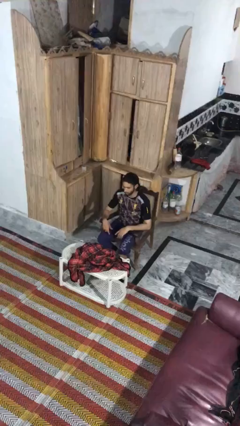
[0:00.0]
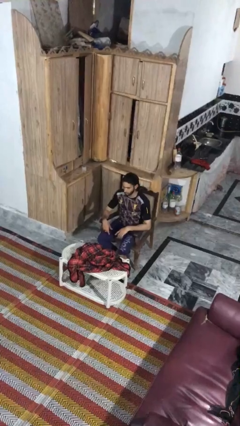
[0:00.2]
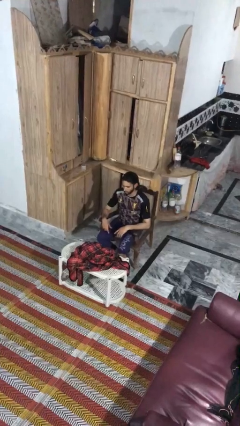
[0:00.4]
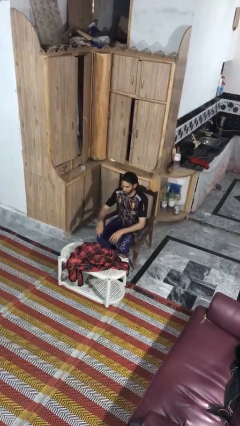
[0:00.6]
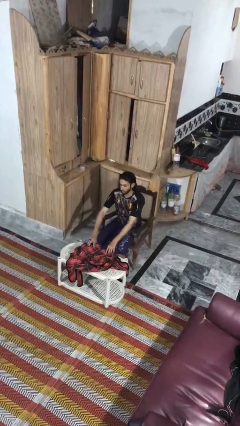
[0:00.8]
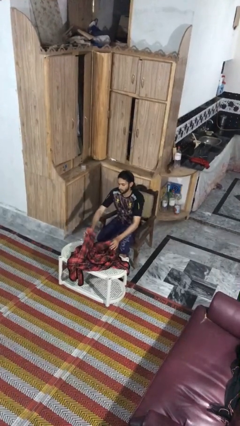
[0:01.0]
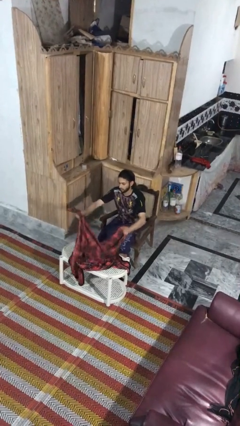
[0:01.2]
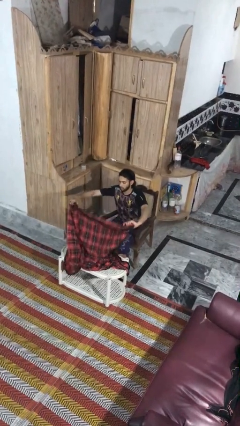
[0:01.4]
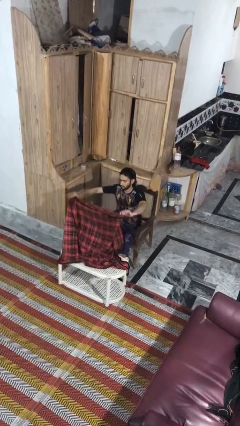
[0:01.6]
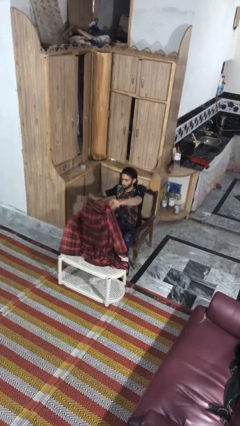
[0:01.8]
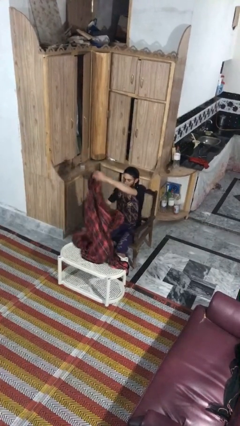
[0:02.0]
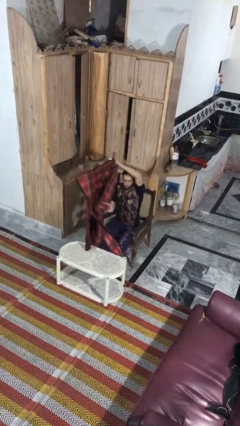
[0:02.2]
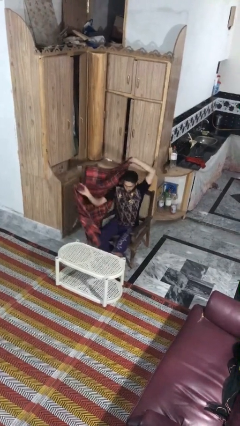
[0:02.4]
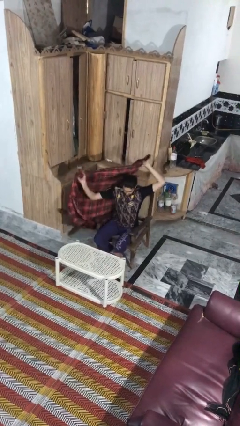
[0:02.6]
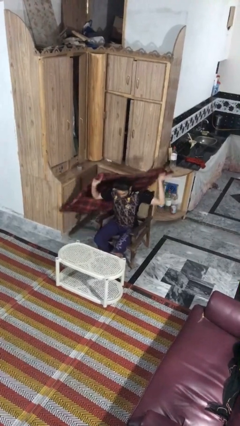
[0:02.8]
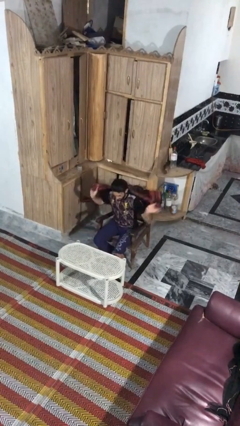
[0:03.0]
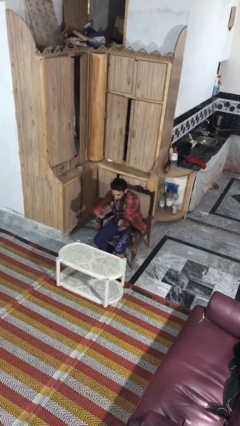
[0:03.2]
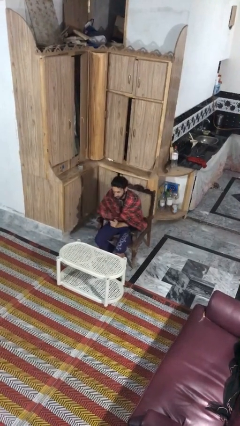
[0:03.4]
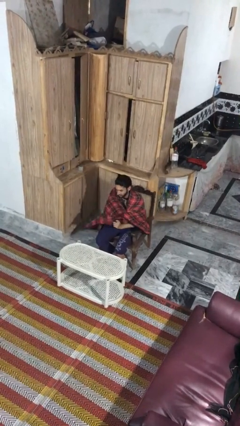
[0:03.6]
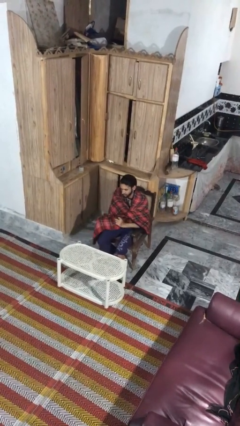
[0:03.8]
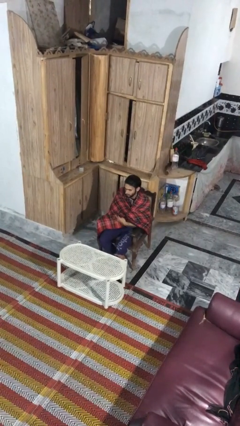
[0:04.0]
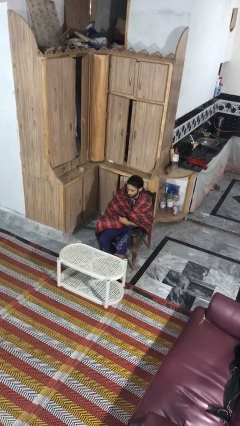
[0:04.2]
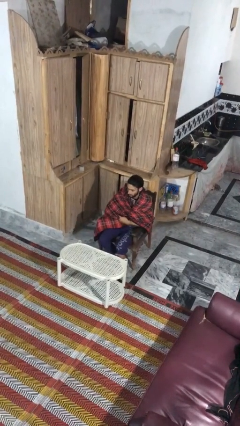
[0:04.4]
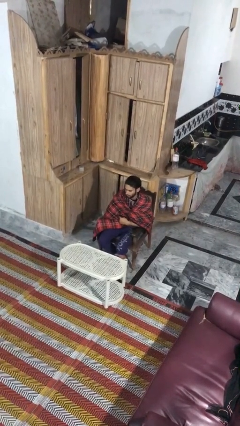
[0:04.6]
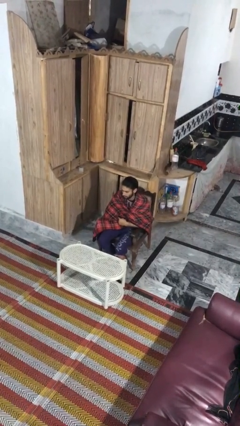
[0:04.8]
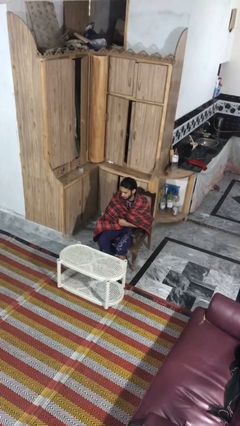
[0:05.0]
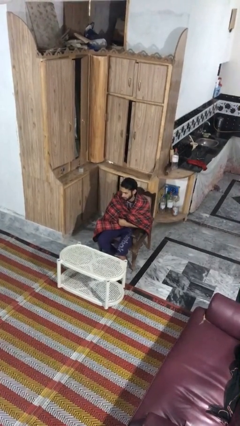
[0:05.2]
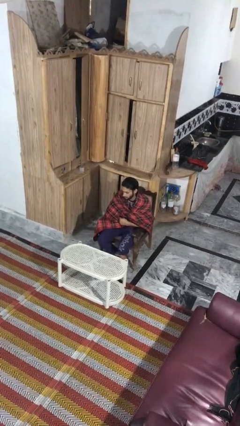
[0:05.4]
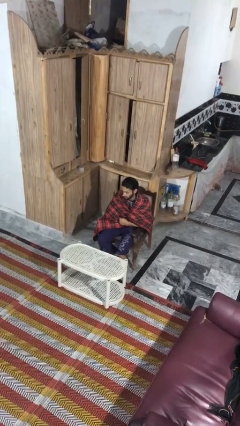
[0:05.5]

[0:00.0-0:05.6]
person covers with blanket

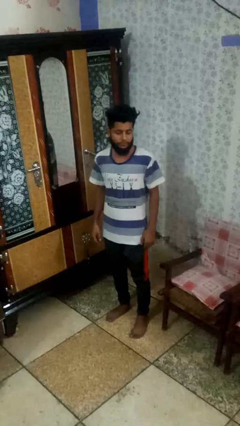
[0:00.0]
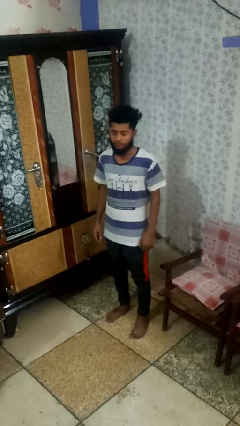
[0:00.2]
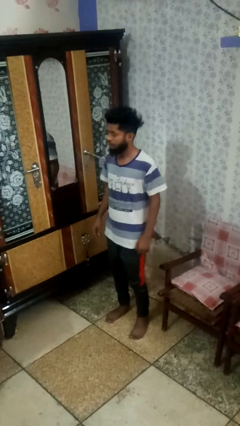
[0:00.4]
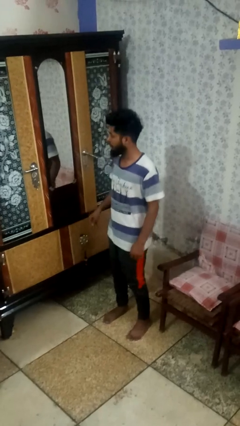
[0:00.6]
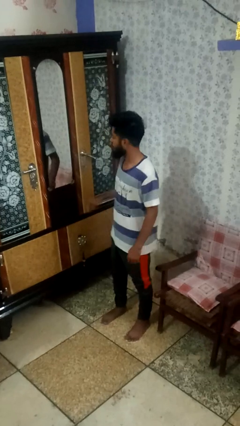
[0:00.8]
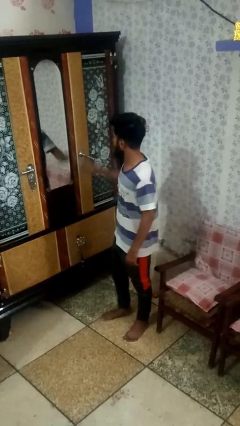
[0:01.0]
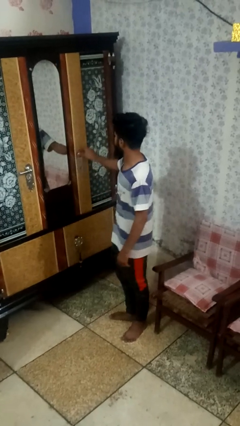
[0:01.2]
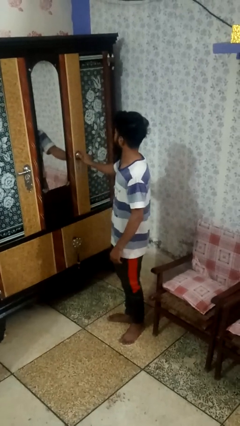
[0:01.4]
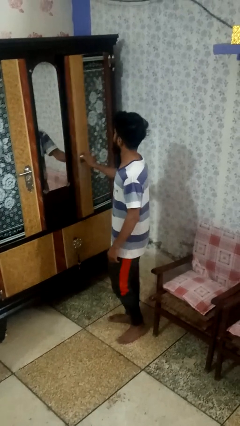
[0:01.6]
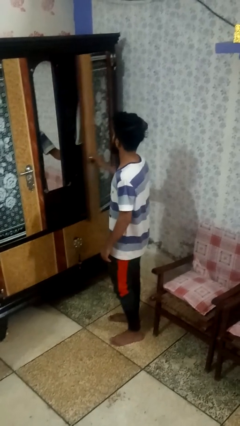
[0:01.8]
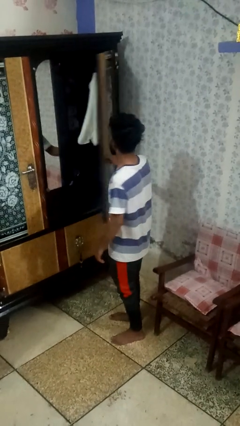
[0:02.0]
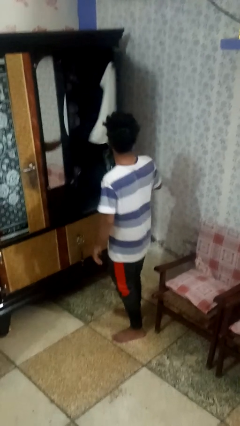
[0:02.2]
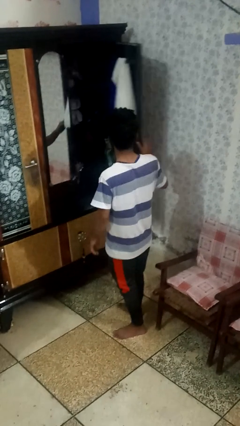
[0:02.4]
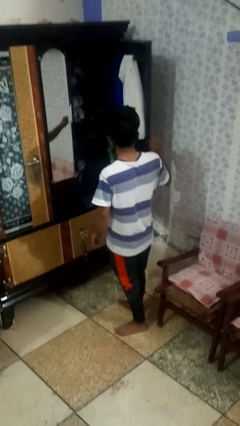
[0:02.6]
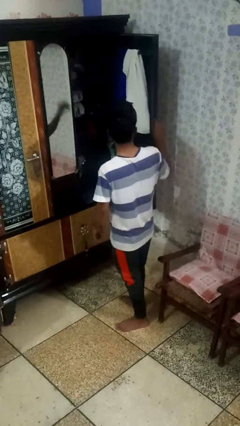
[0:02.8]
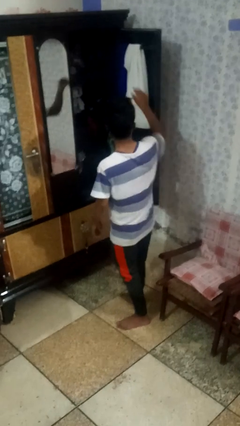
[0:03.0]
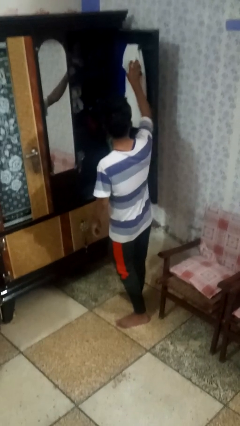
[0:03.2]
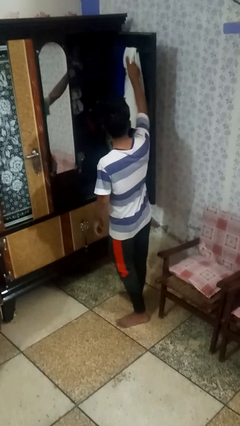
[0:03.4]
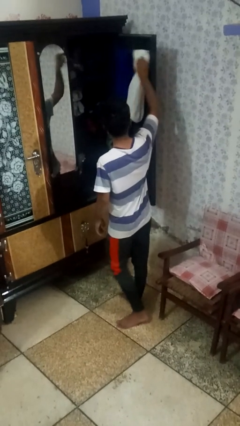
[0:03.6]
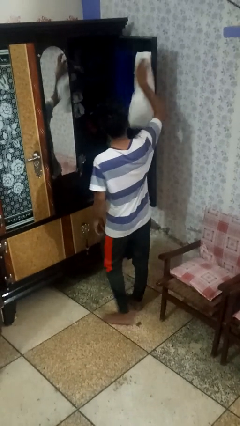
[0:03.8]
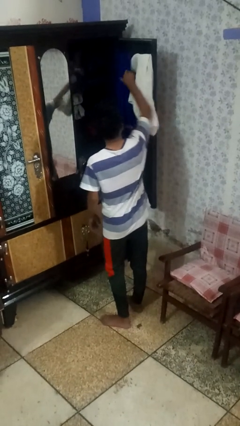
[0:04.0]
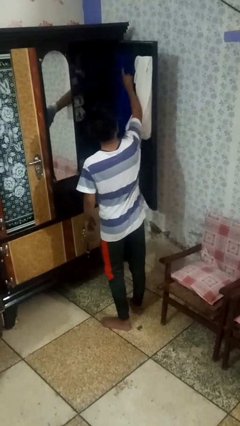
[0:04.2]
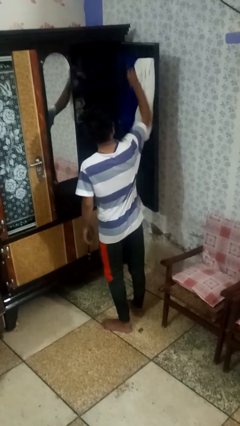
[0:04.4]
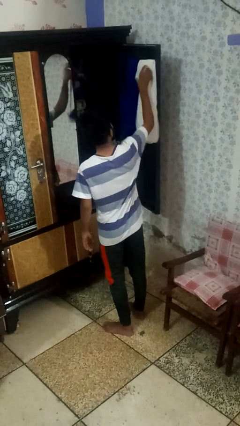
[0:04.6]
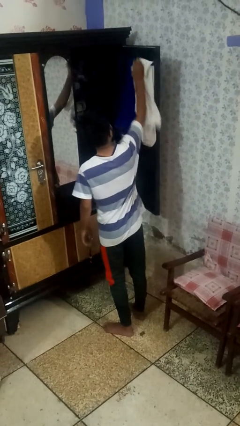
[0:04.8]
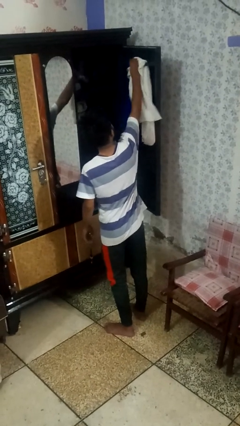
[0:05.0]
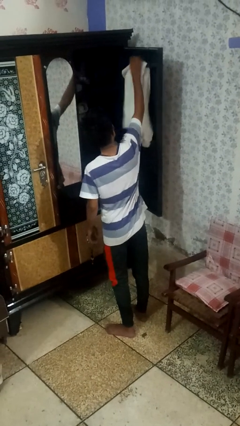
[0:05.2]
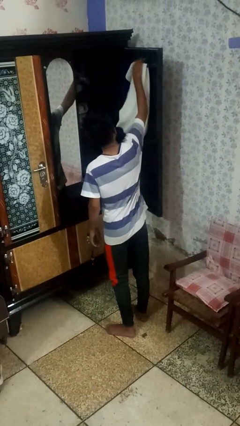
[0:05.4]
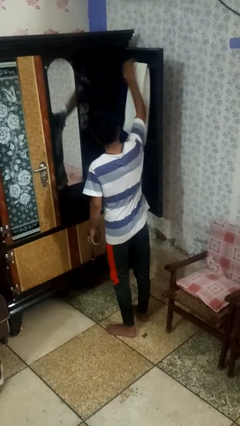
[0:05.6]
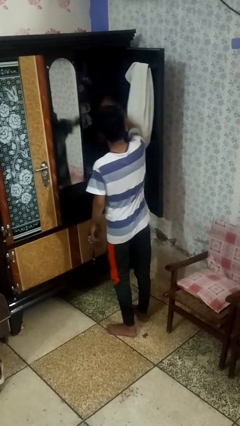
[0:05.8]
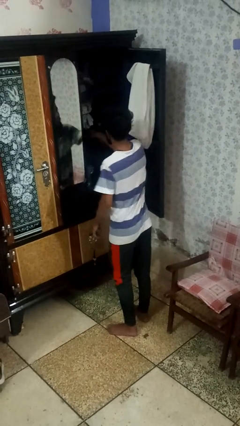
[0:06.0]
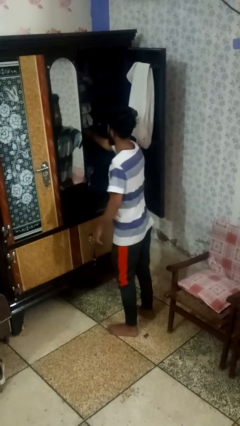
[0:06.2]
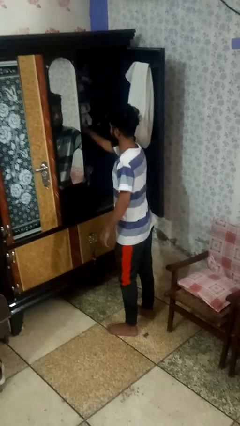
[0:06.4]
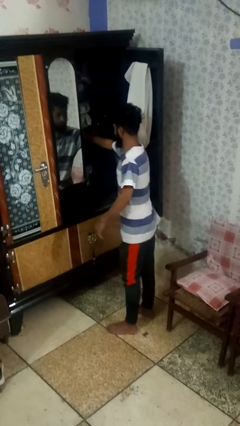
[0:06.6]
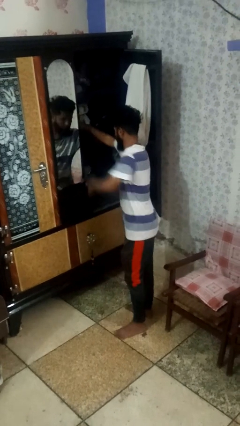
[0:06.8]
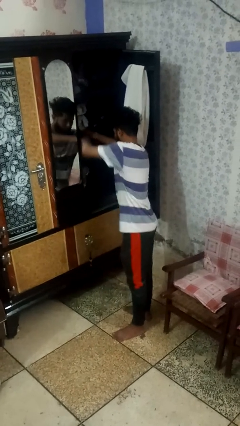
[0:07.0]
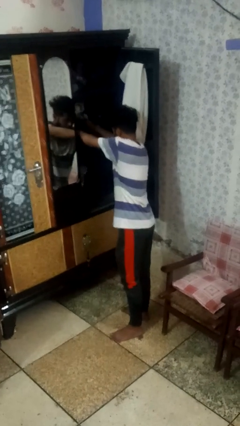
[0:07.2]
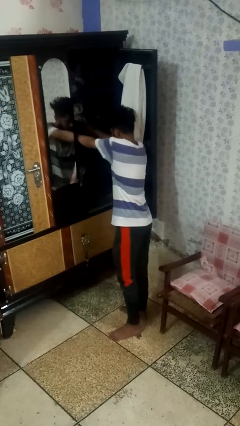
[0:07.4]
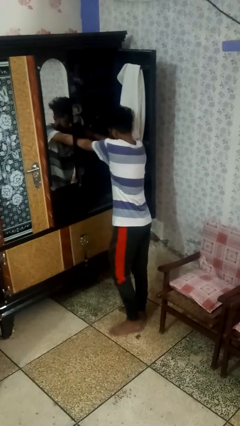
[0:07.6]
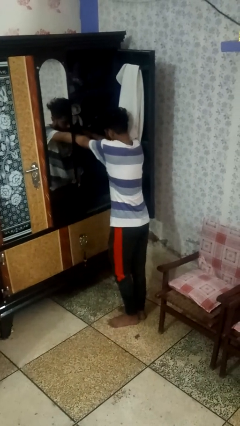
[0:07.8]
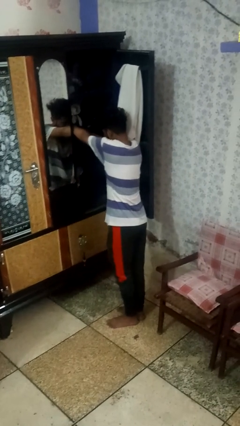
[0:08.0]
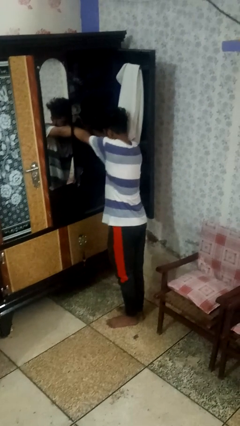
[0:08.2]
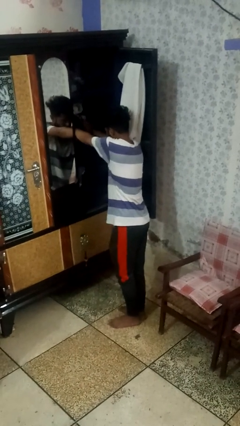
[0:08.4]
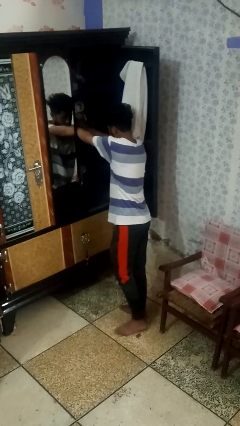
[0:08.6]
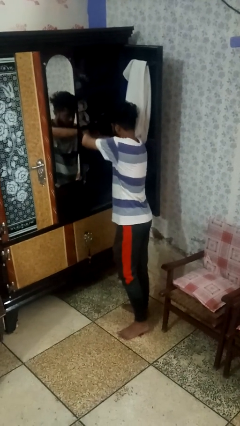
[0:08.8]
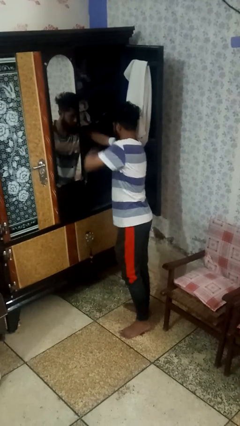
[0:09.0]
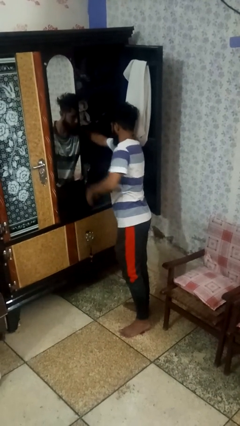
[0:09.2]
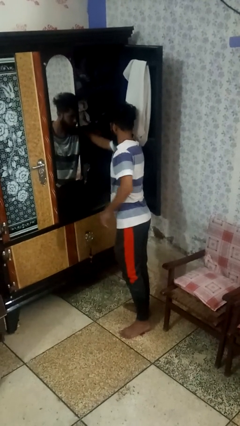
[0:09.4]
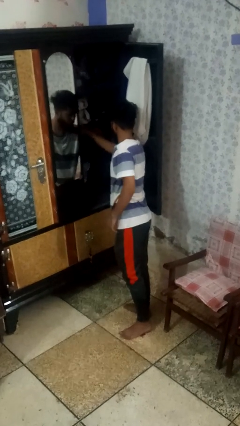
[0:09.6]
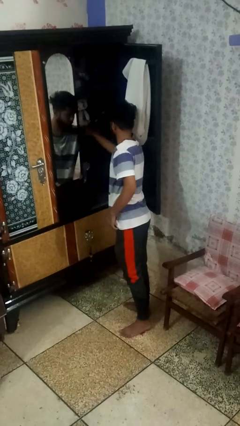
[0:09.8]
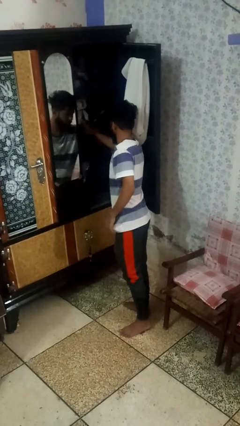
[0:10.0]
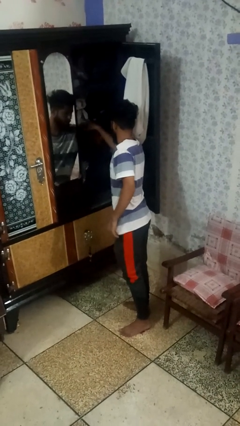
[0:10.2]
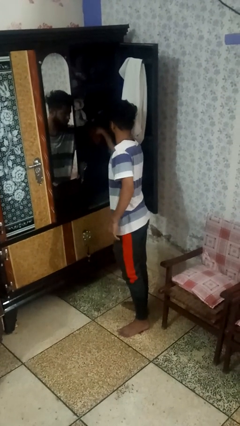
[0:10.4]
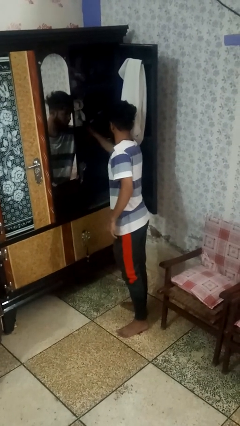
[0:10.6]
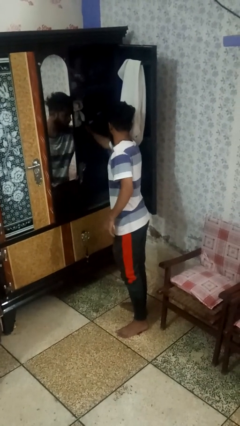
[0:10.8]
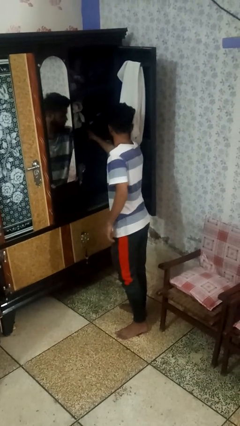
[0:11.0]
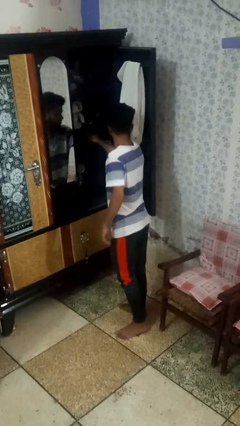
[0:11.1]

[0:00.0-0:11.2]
person opens dresser drawer

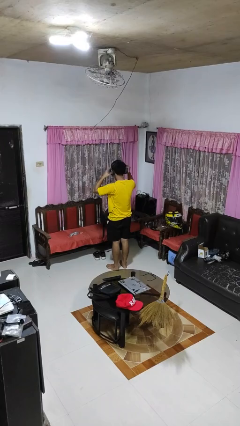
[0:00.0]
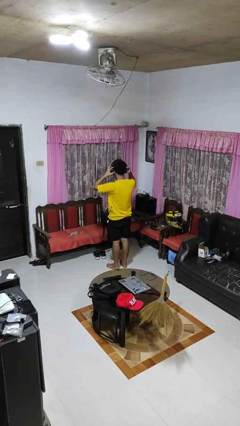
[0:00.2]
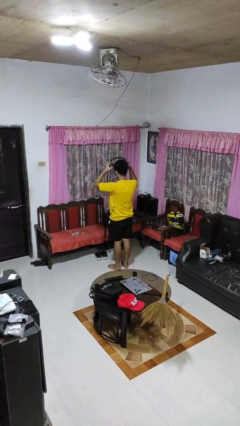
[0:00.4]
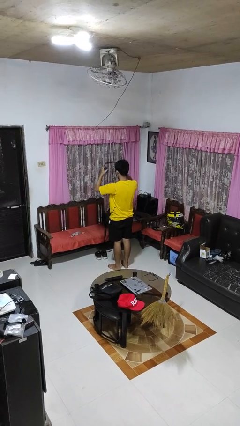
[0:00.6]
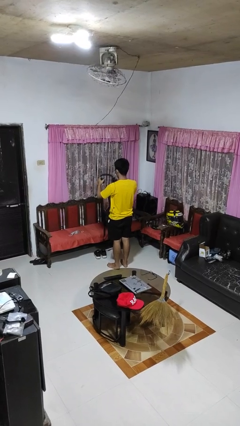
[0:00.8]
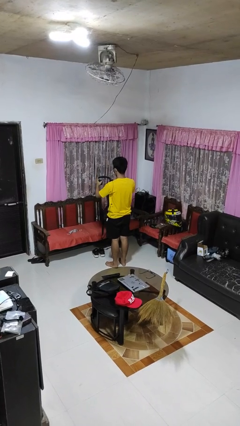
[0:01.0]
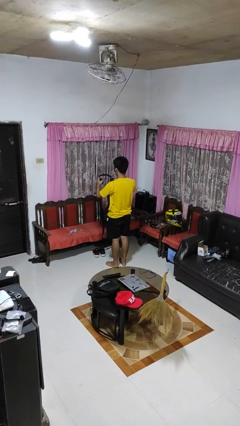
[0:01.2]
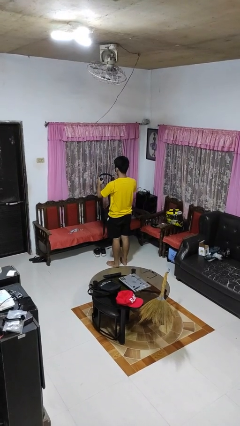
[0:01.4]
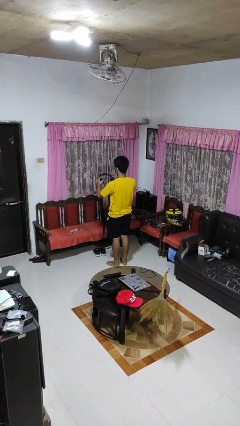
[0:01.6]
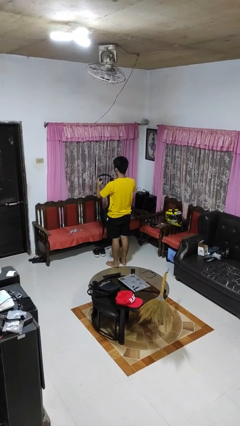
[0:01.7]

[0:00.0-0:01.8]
person takes off headphones
